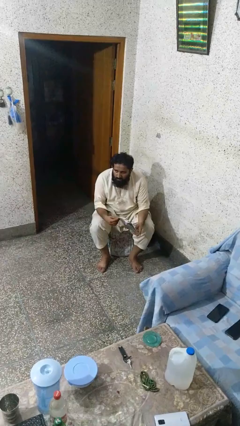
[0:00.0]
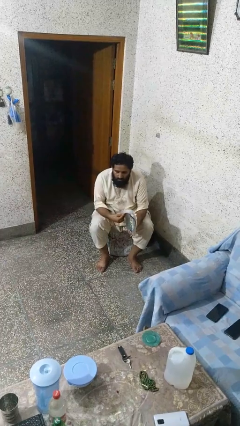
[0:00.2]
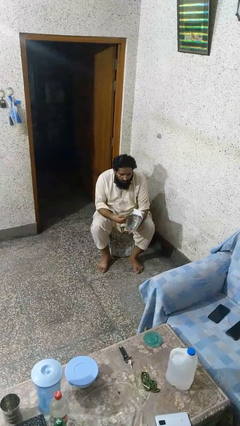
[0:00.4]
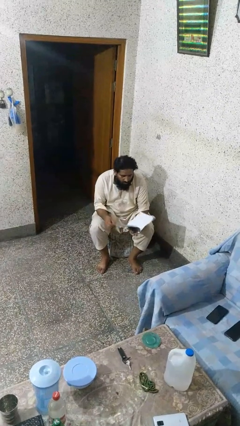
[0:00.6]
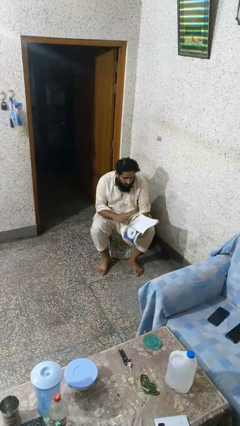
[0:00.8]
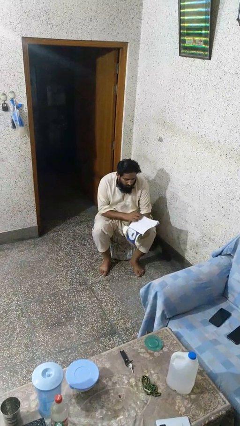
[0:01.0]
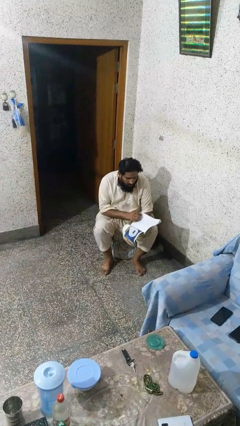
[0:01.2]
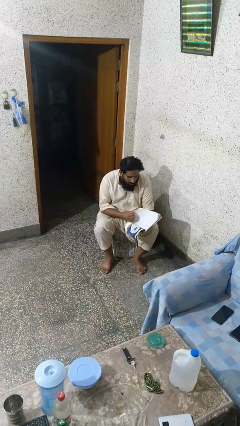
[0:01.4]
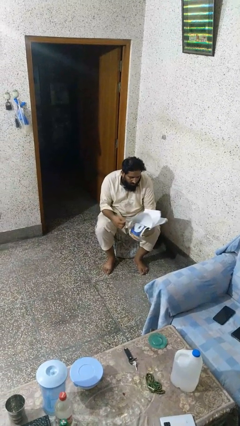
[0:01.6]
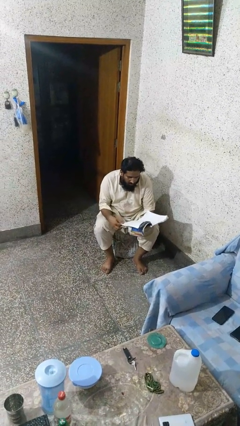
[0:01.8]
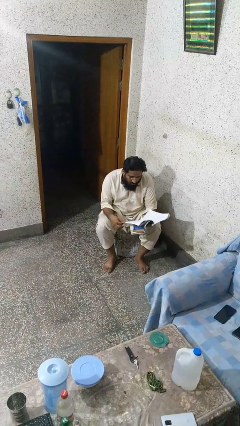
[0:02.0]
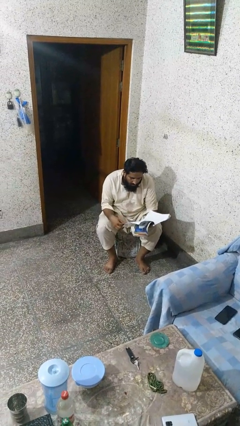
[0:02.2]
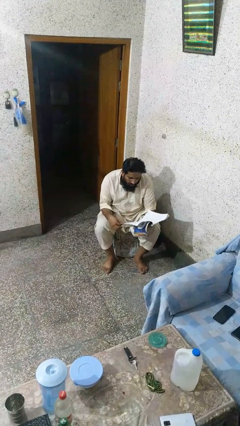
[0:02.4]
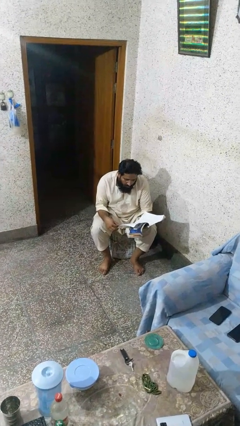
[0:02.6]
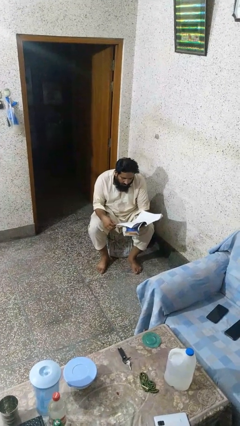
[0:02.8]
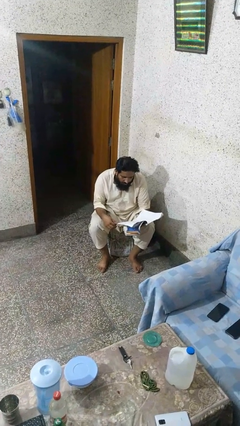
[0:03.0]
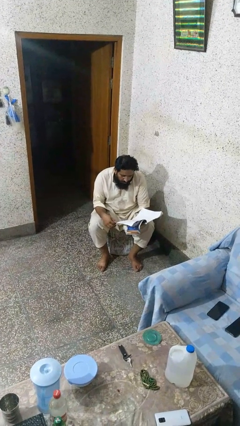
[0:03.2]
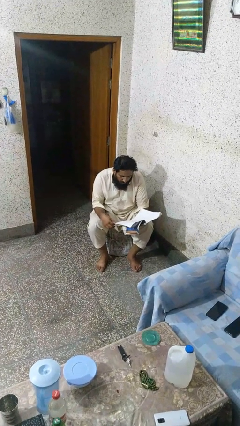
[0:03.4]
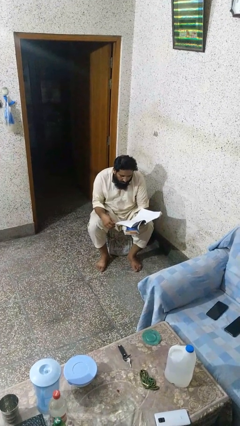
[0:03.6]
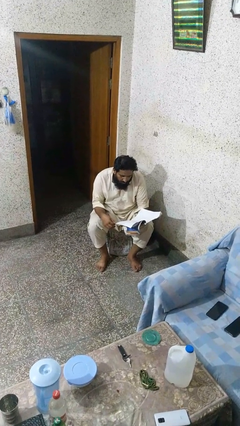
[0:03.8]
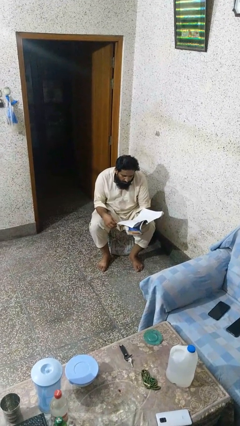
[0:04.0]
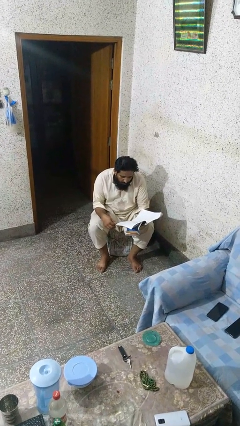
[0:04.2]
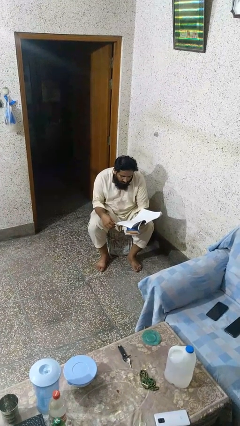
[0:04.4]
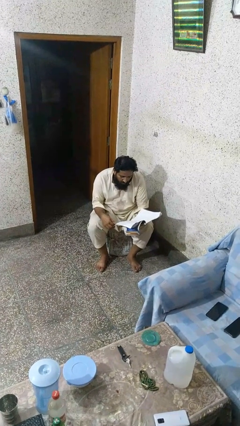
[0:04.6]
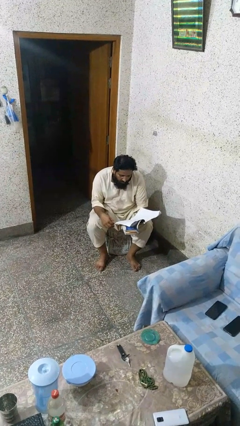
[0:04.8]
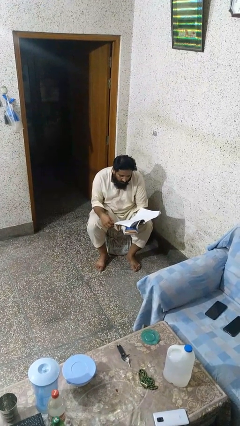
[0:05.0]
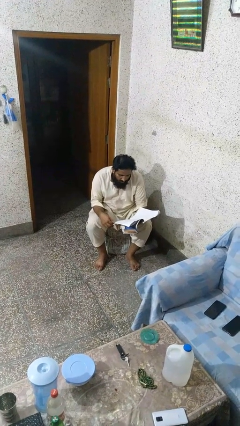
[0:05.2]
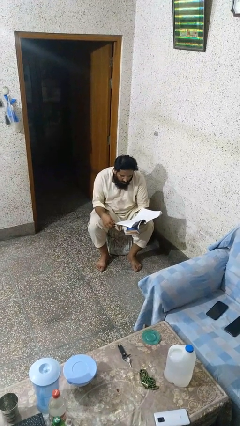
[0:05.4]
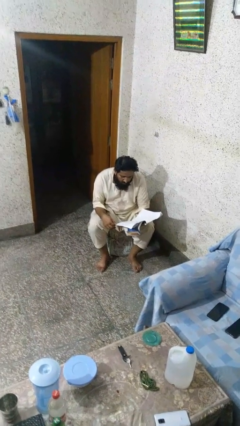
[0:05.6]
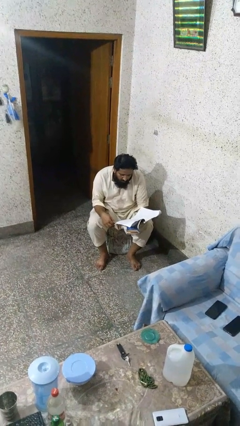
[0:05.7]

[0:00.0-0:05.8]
person reads magazine

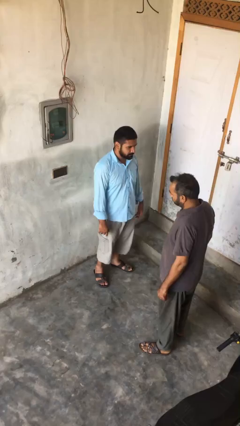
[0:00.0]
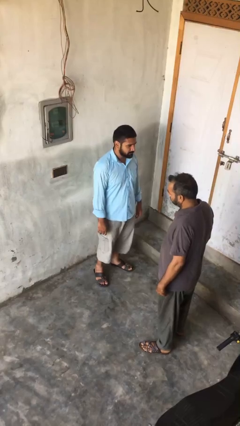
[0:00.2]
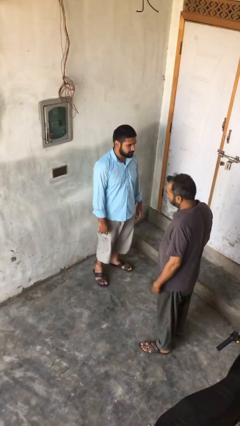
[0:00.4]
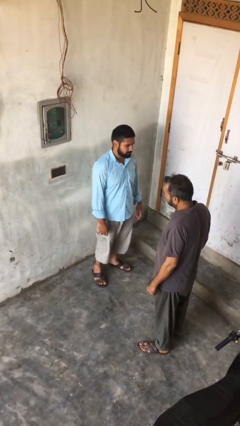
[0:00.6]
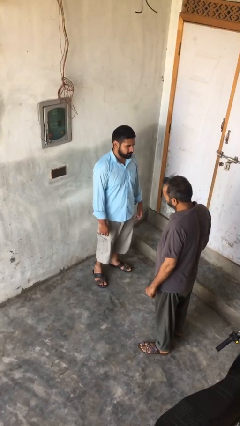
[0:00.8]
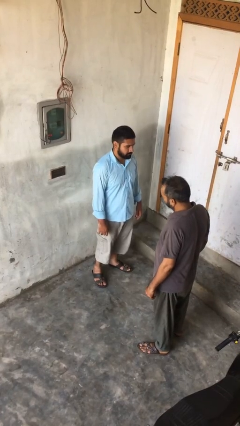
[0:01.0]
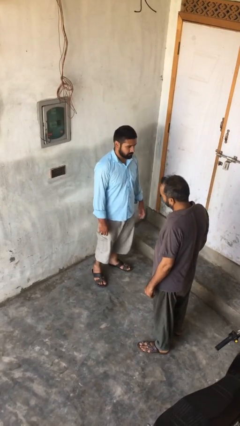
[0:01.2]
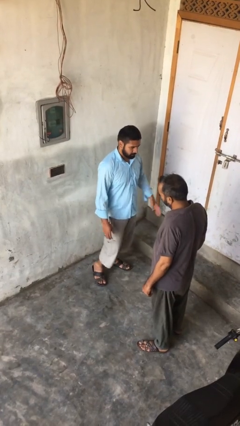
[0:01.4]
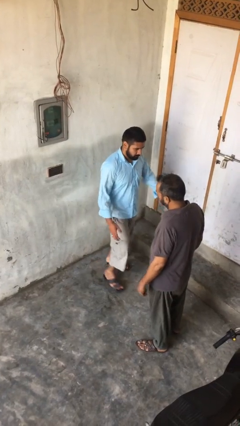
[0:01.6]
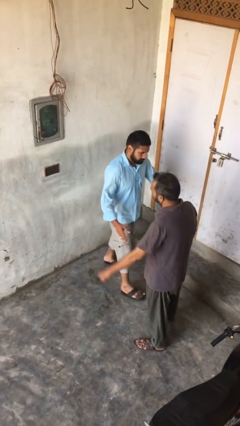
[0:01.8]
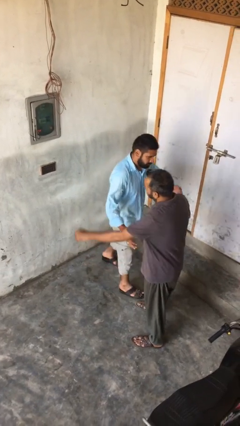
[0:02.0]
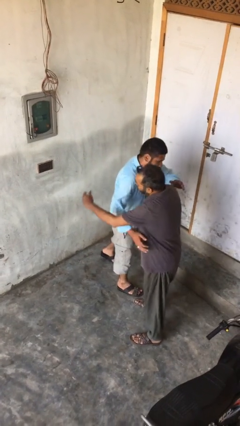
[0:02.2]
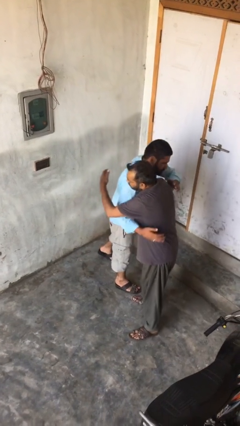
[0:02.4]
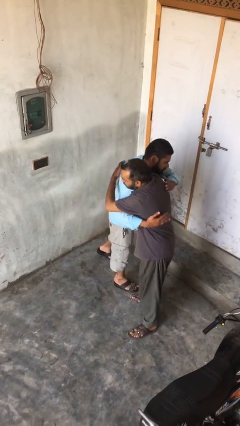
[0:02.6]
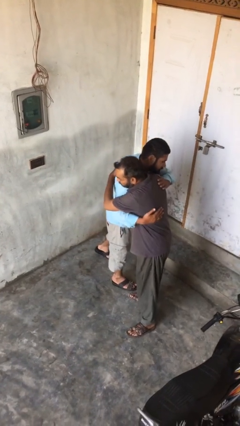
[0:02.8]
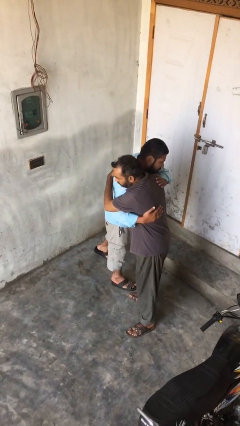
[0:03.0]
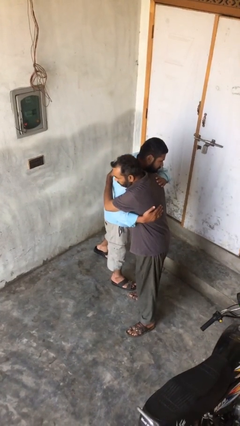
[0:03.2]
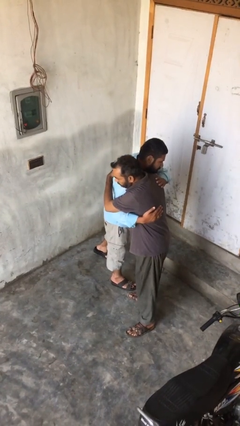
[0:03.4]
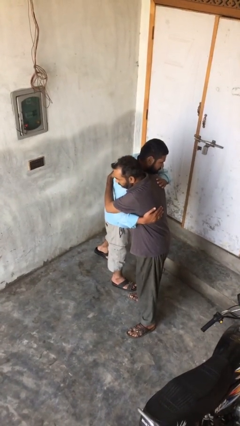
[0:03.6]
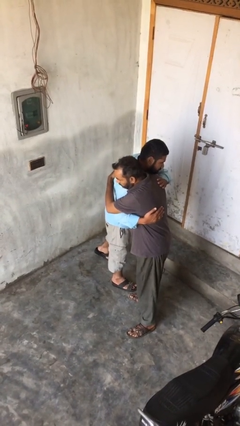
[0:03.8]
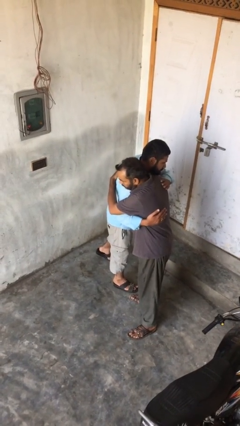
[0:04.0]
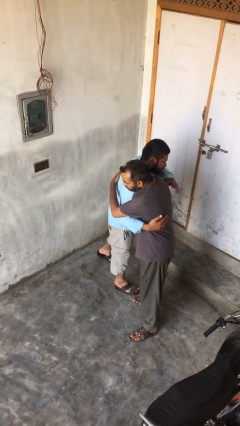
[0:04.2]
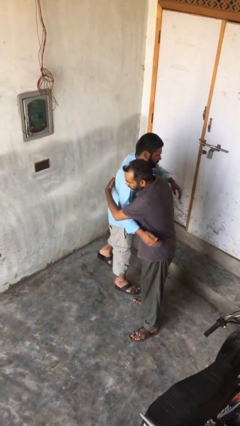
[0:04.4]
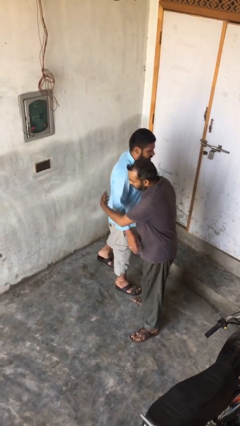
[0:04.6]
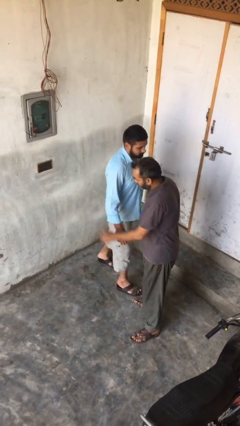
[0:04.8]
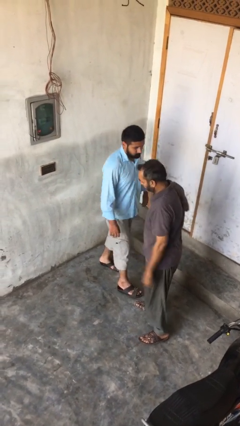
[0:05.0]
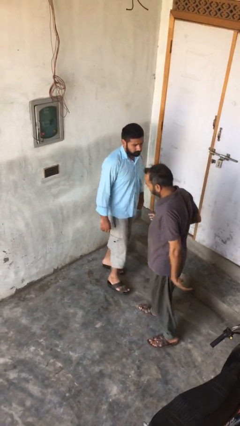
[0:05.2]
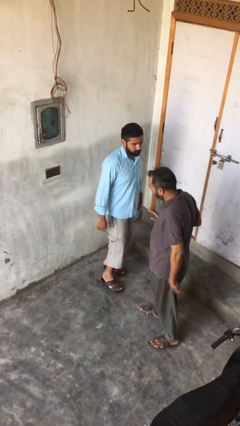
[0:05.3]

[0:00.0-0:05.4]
person embraces person

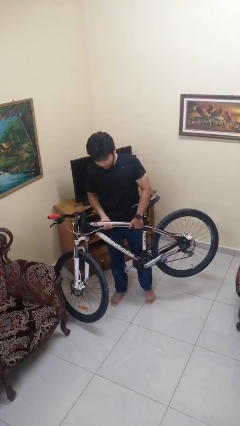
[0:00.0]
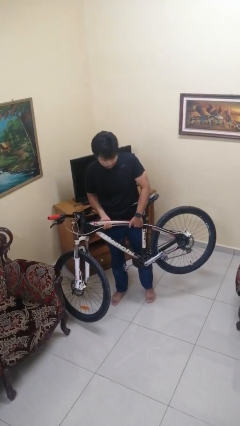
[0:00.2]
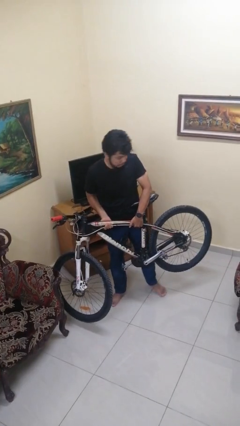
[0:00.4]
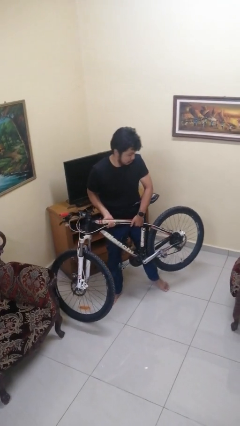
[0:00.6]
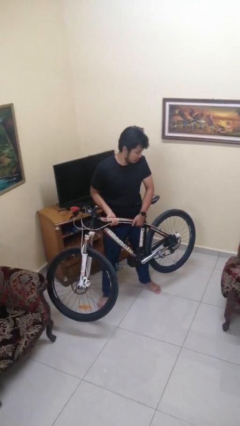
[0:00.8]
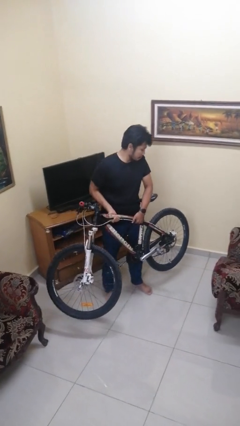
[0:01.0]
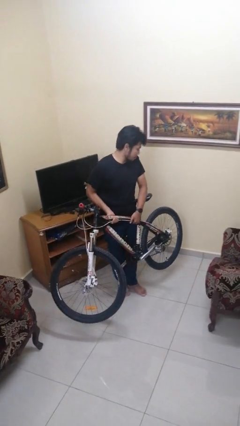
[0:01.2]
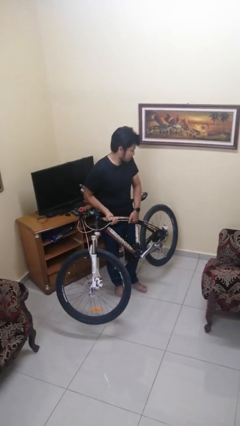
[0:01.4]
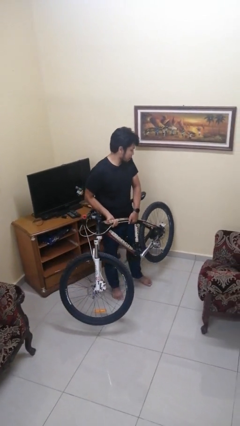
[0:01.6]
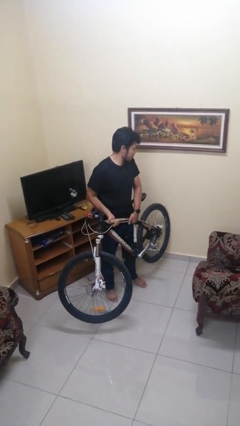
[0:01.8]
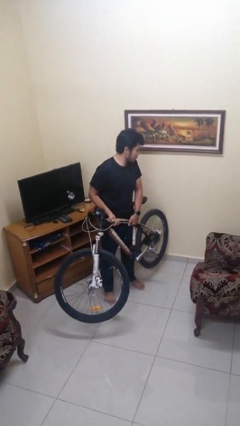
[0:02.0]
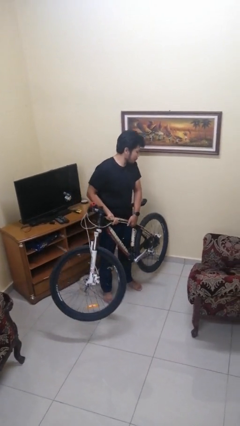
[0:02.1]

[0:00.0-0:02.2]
person carries bicycle

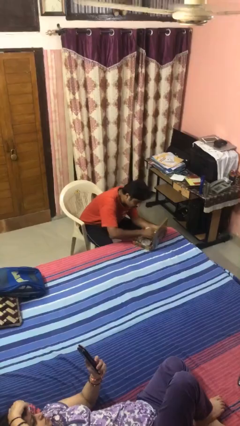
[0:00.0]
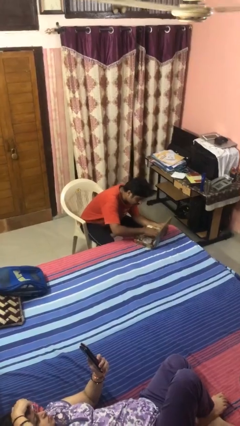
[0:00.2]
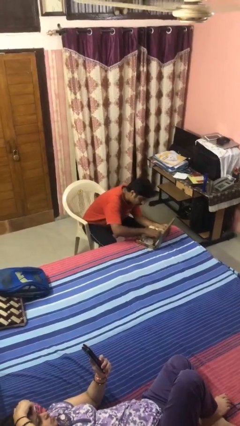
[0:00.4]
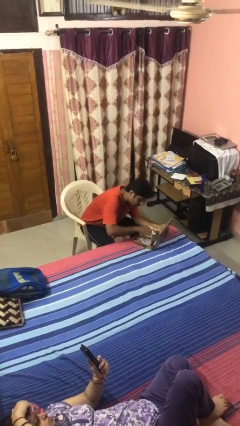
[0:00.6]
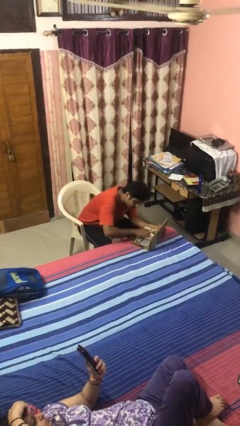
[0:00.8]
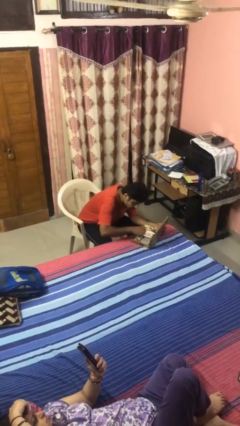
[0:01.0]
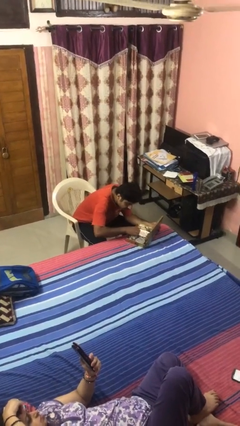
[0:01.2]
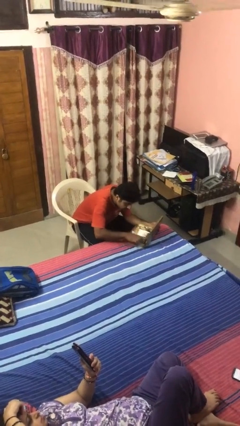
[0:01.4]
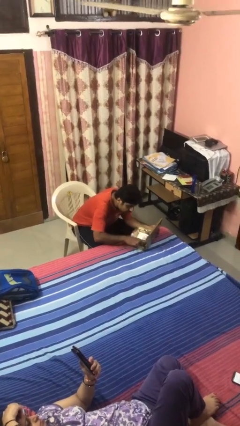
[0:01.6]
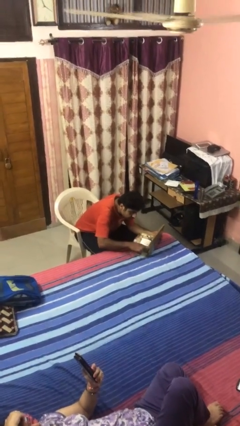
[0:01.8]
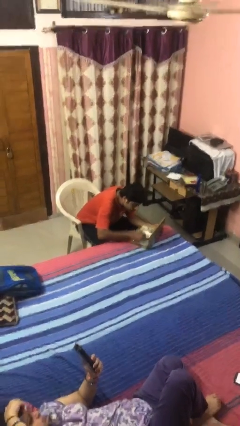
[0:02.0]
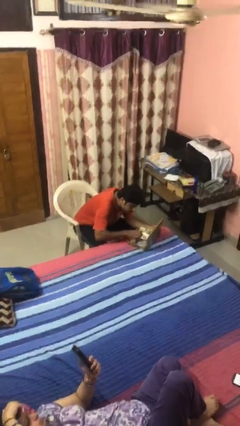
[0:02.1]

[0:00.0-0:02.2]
person searches jewelry box

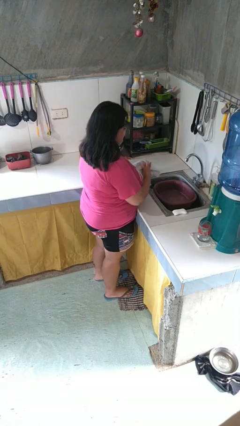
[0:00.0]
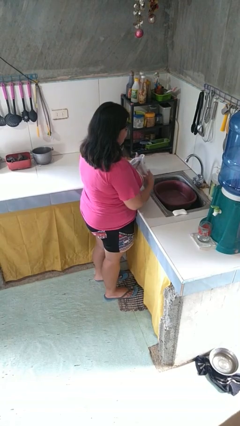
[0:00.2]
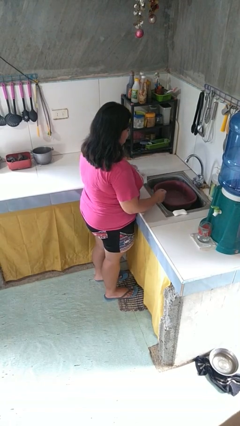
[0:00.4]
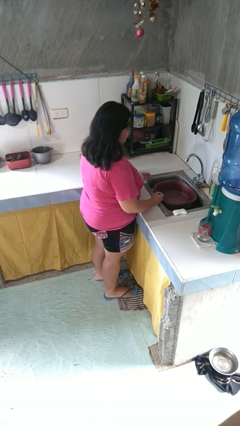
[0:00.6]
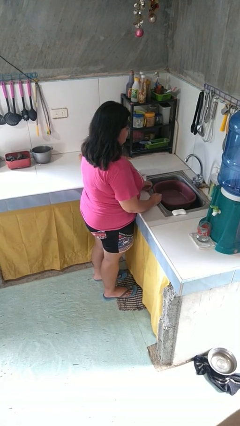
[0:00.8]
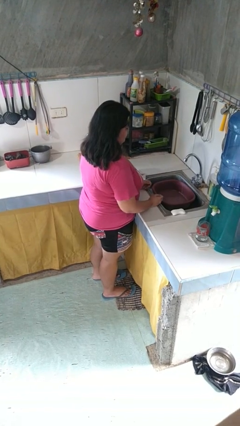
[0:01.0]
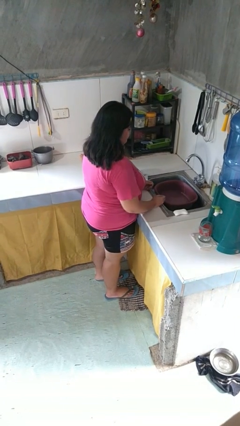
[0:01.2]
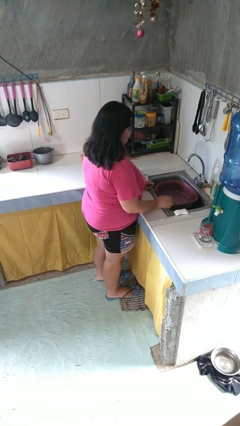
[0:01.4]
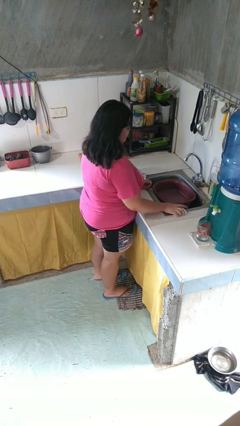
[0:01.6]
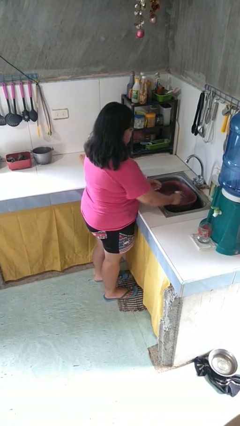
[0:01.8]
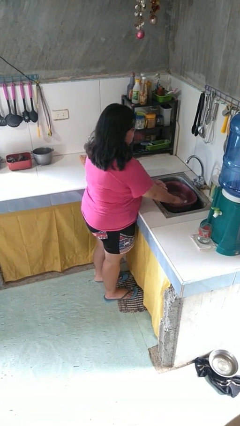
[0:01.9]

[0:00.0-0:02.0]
person washes hands
